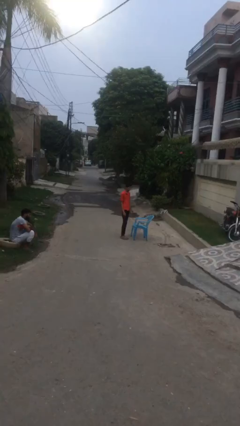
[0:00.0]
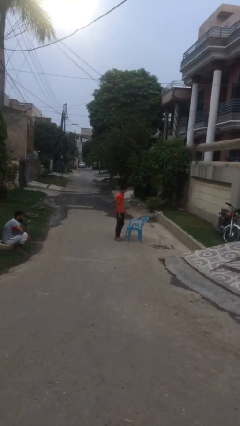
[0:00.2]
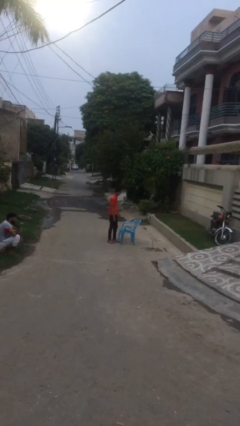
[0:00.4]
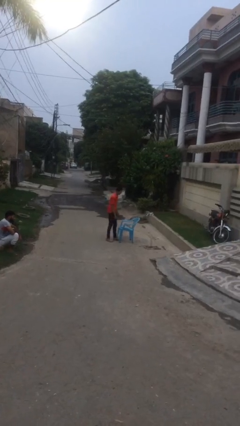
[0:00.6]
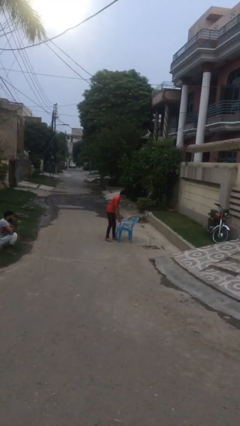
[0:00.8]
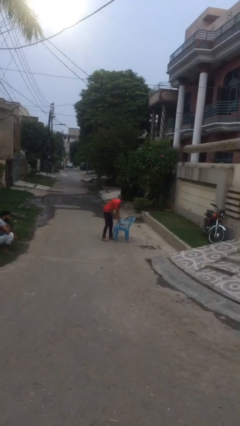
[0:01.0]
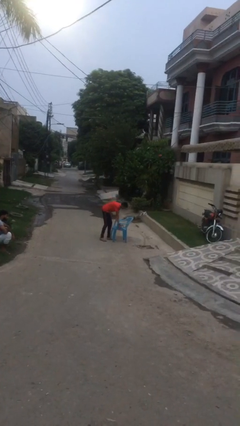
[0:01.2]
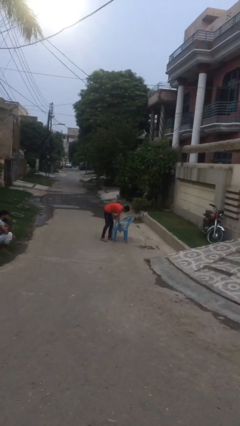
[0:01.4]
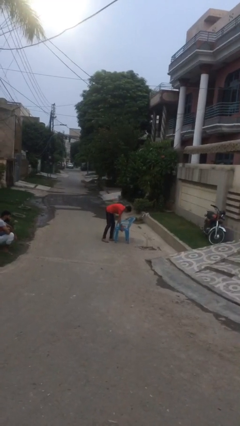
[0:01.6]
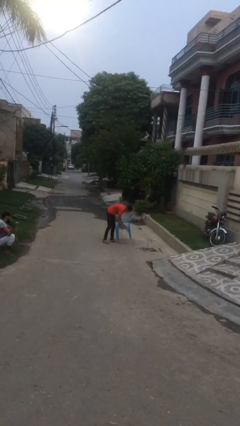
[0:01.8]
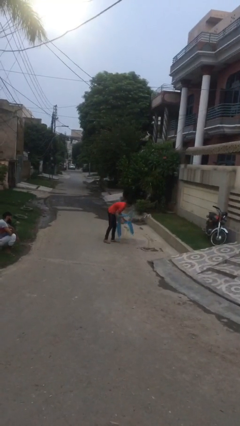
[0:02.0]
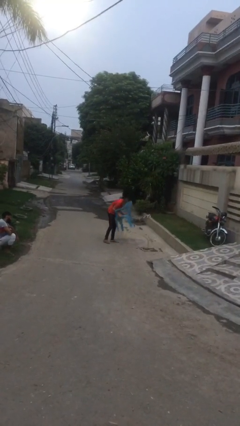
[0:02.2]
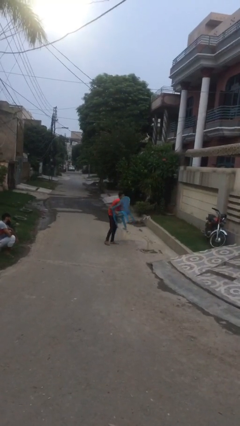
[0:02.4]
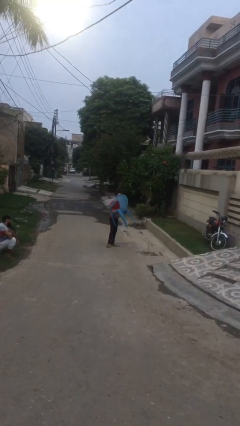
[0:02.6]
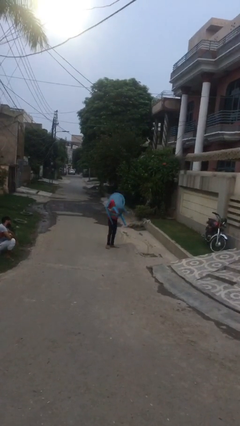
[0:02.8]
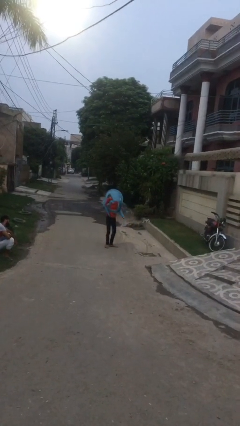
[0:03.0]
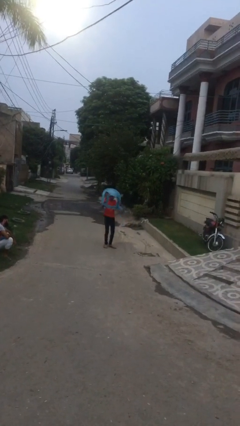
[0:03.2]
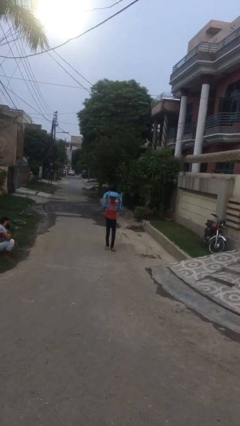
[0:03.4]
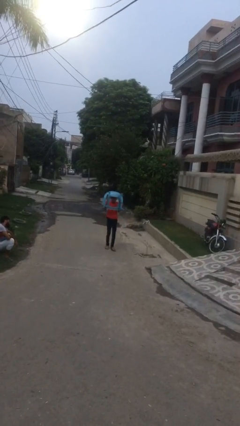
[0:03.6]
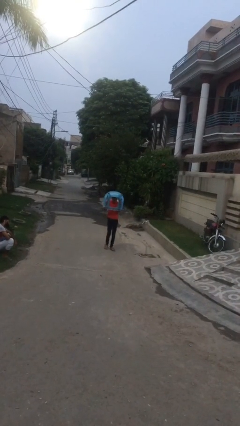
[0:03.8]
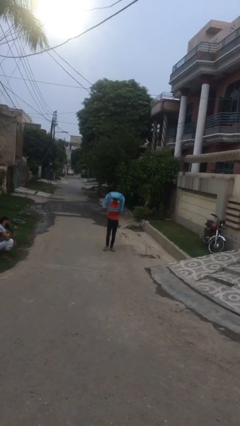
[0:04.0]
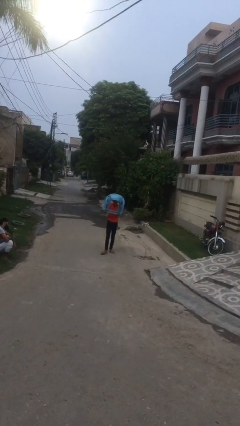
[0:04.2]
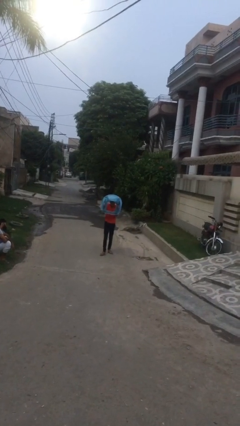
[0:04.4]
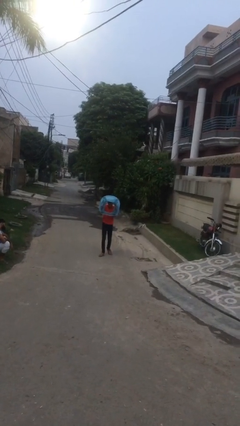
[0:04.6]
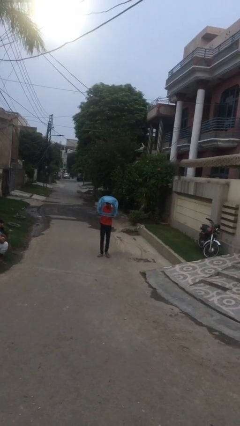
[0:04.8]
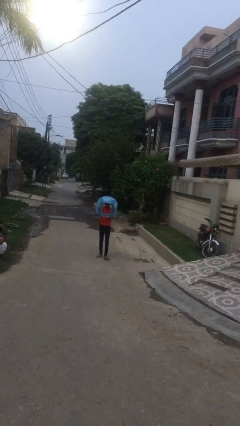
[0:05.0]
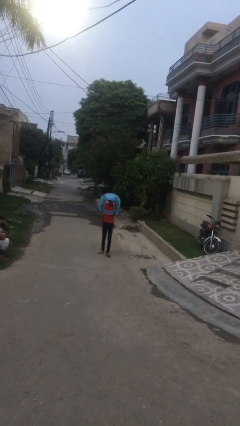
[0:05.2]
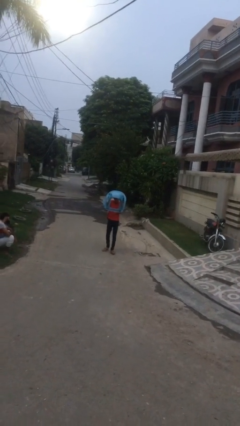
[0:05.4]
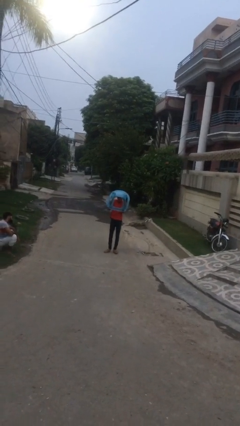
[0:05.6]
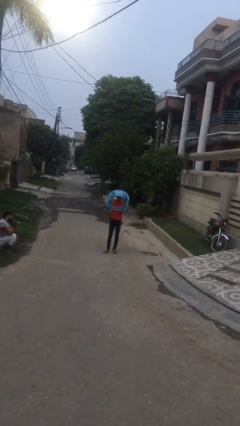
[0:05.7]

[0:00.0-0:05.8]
person carries heavy object

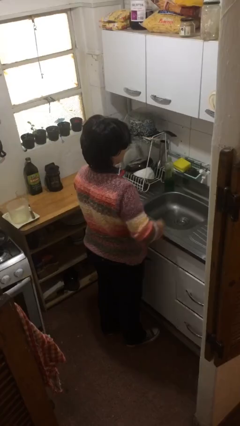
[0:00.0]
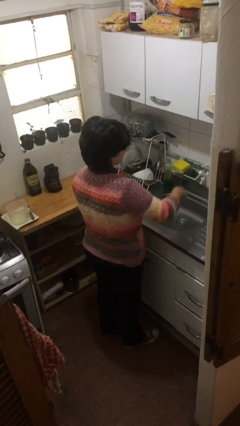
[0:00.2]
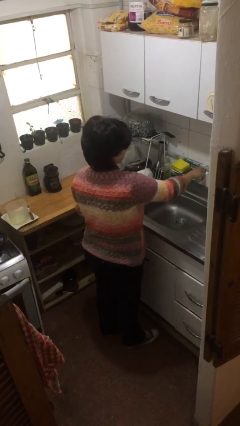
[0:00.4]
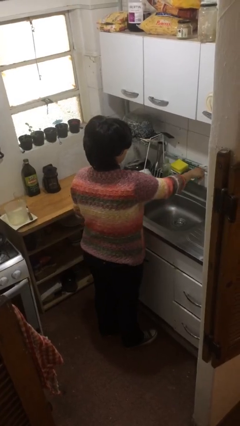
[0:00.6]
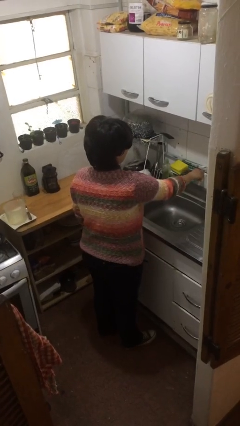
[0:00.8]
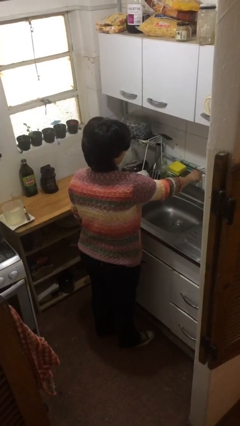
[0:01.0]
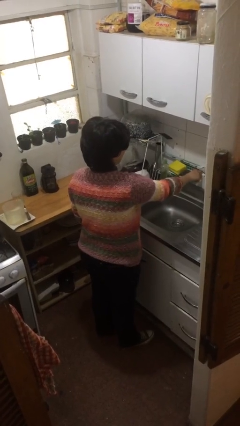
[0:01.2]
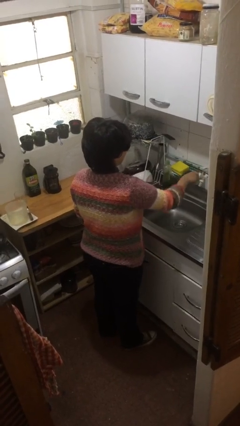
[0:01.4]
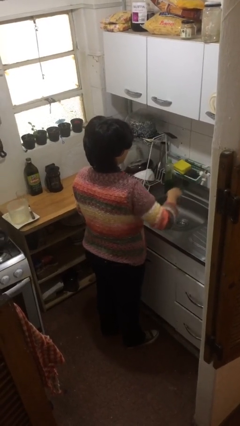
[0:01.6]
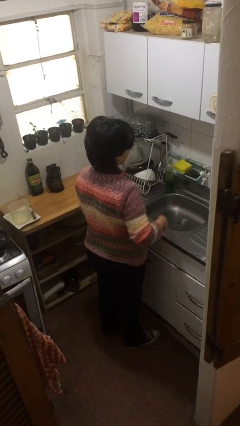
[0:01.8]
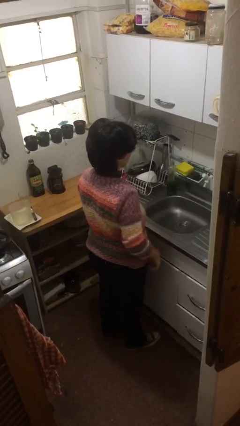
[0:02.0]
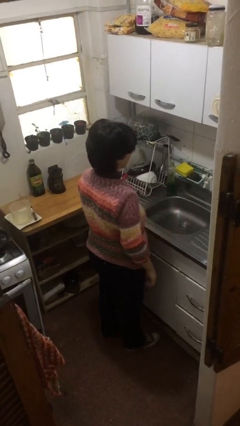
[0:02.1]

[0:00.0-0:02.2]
person turns off faucet

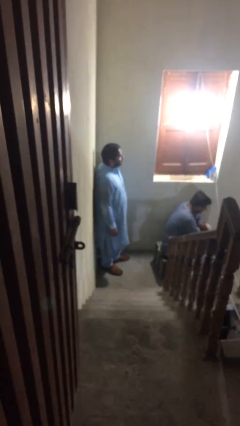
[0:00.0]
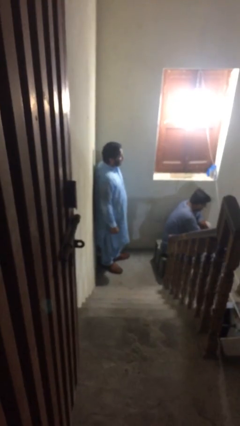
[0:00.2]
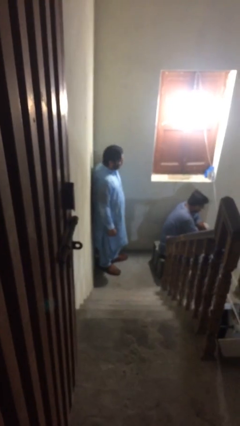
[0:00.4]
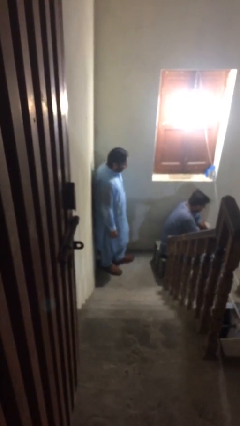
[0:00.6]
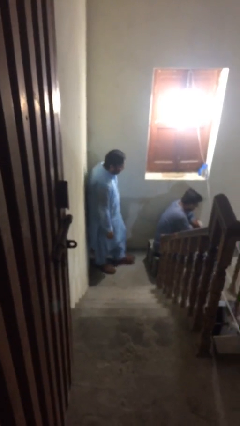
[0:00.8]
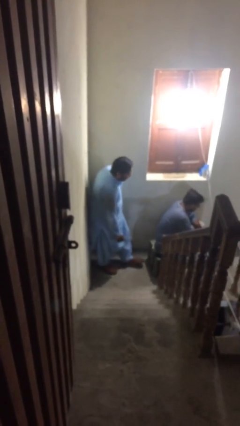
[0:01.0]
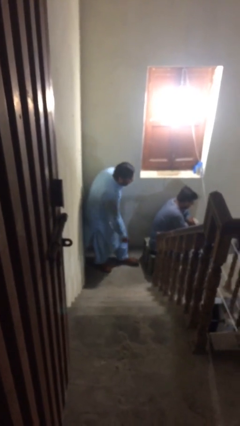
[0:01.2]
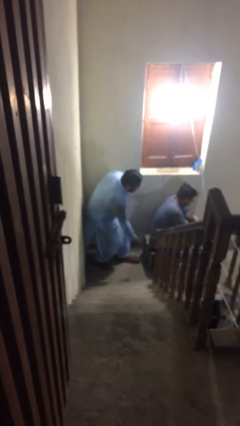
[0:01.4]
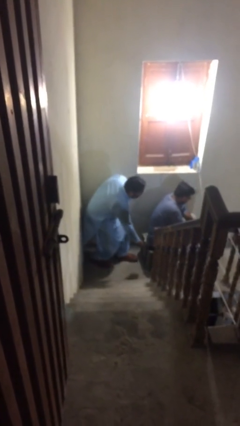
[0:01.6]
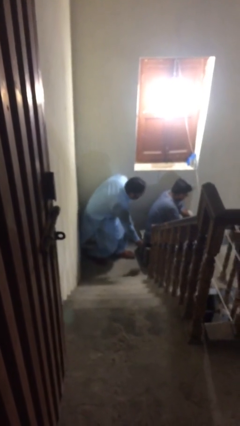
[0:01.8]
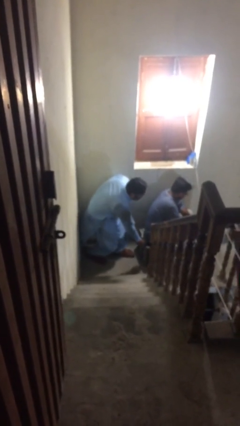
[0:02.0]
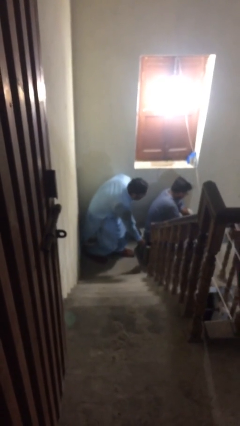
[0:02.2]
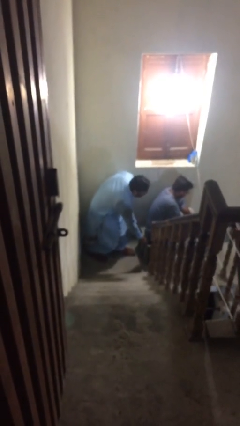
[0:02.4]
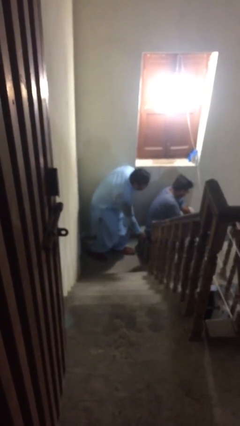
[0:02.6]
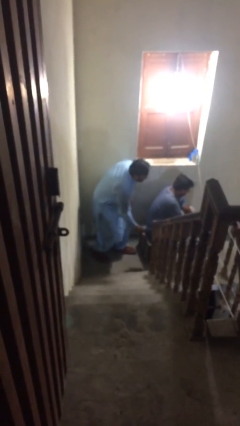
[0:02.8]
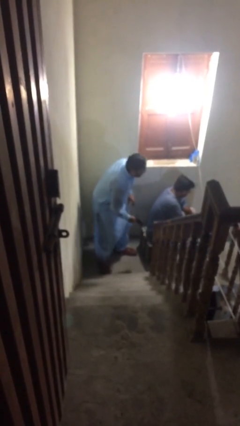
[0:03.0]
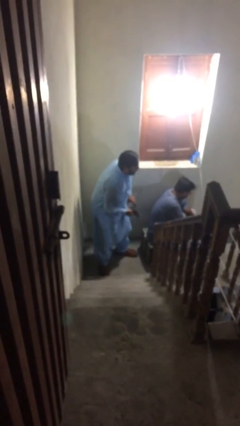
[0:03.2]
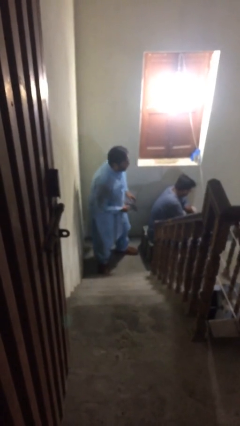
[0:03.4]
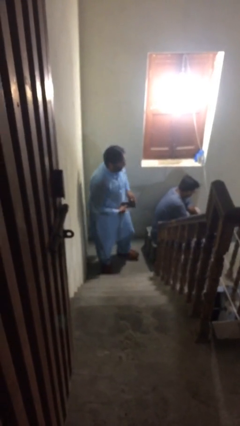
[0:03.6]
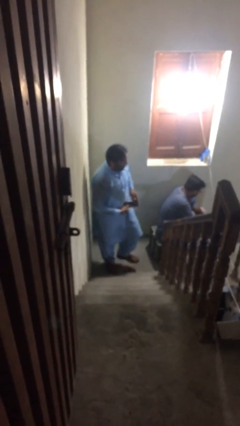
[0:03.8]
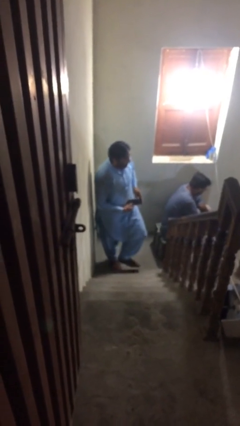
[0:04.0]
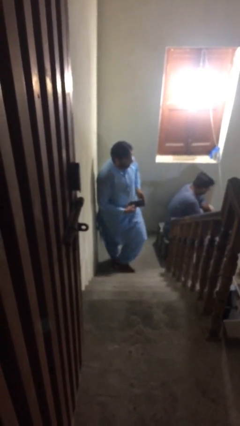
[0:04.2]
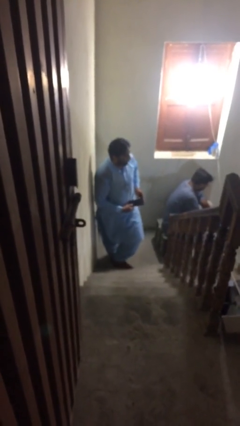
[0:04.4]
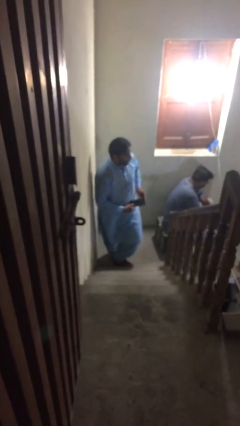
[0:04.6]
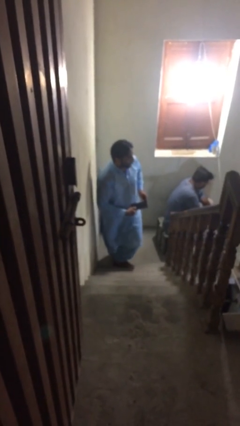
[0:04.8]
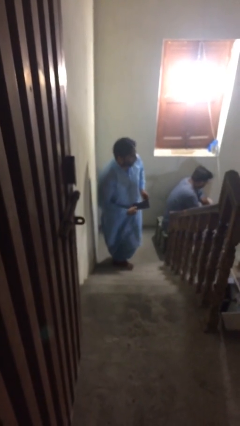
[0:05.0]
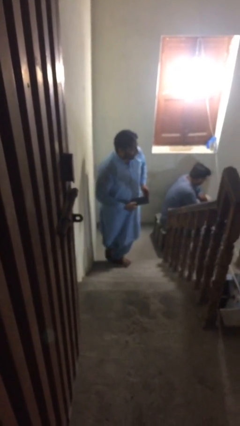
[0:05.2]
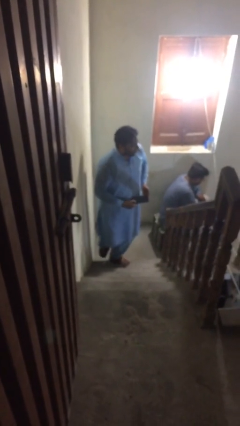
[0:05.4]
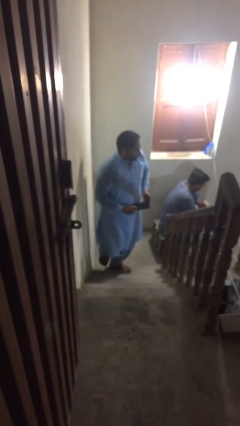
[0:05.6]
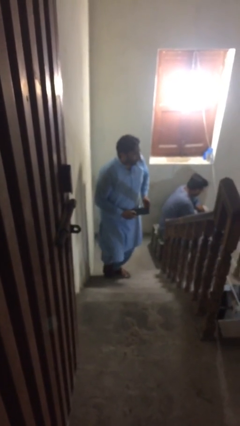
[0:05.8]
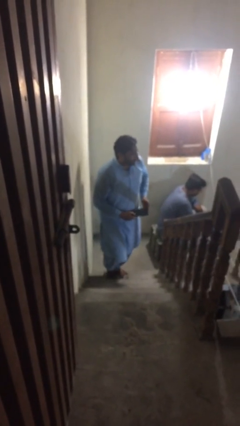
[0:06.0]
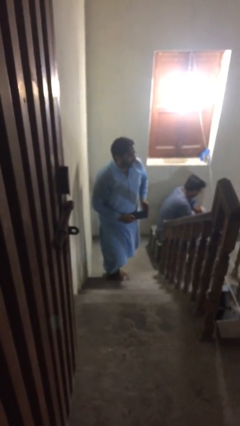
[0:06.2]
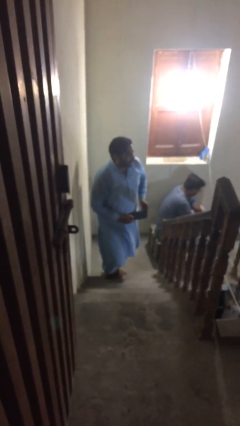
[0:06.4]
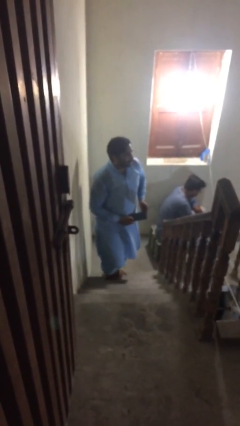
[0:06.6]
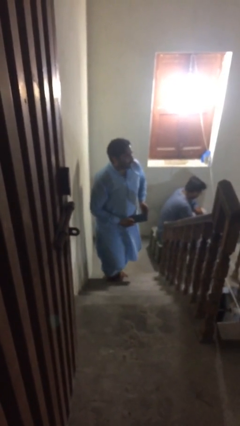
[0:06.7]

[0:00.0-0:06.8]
person steals object from person

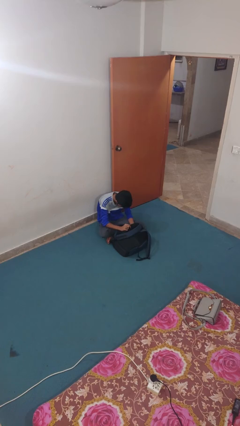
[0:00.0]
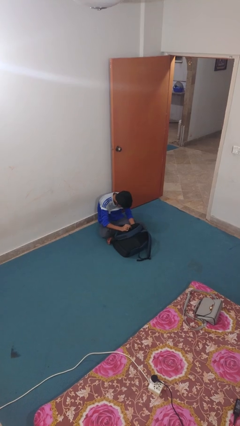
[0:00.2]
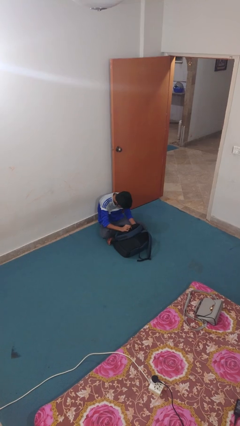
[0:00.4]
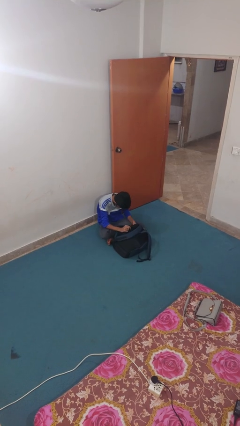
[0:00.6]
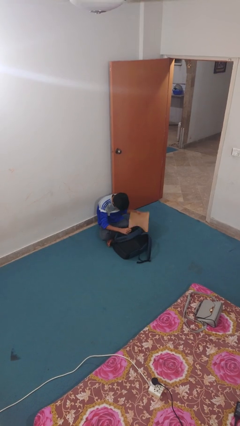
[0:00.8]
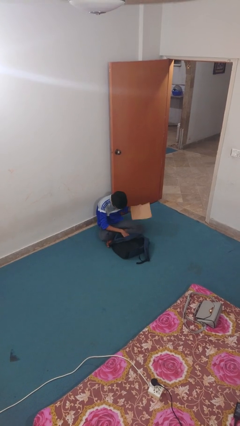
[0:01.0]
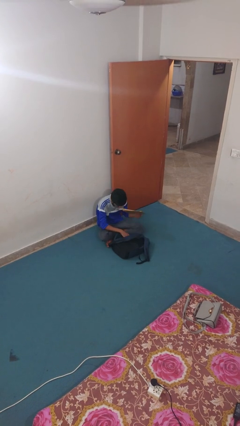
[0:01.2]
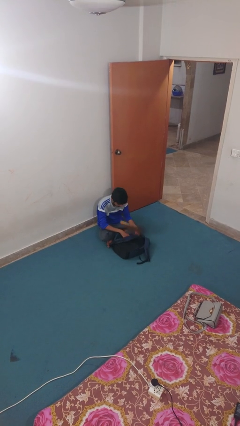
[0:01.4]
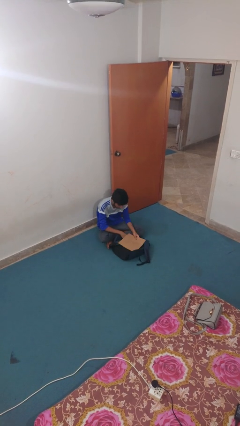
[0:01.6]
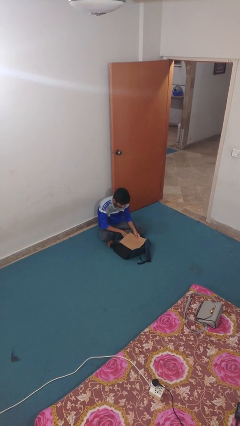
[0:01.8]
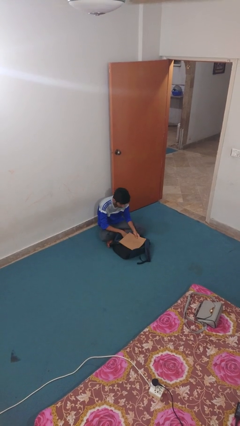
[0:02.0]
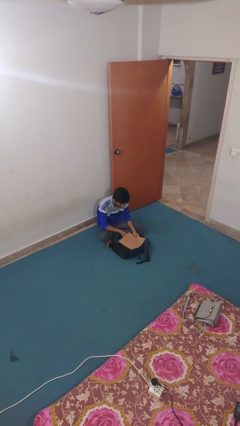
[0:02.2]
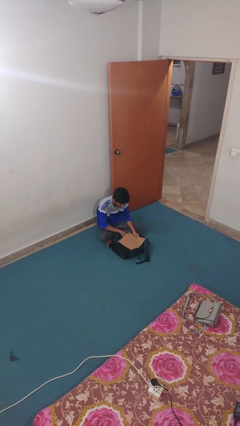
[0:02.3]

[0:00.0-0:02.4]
person takes object from backpack
